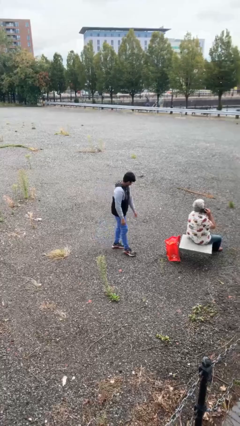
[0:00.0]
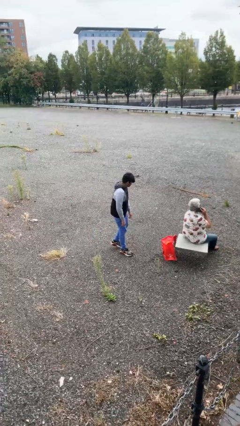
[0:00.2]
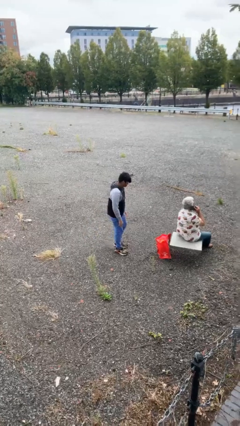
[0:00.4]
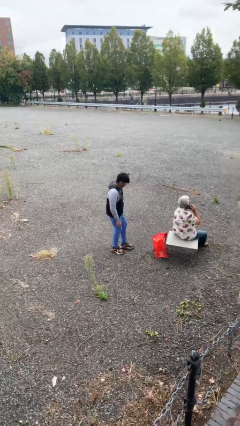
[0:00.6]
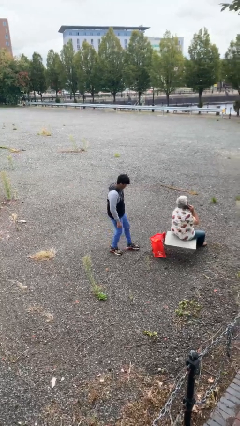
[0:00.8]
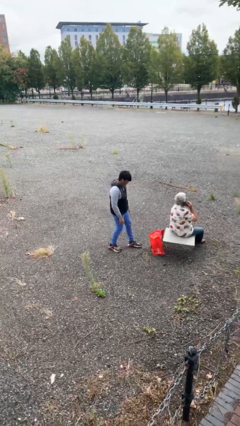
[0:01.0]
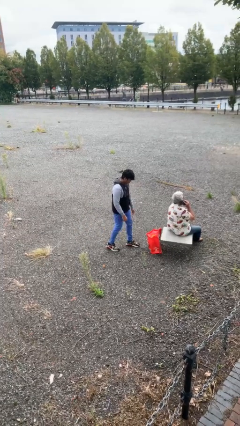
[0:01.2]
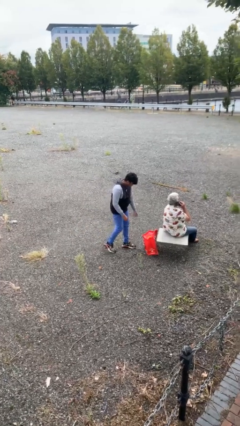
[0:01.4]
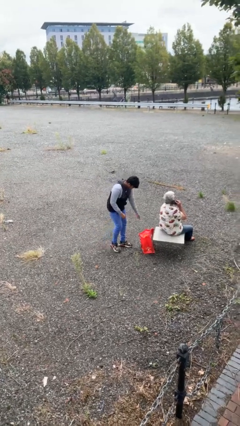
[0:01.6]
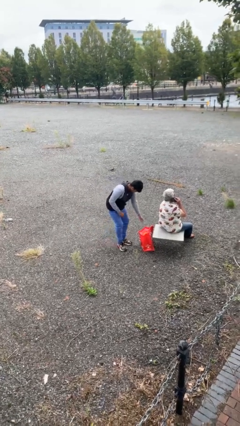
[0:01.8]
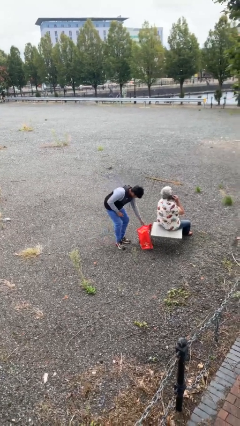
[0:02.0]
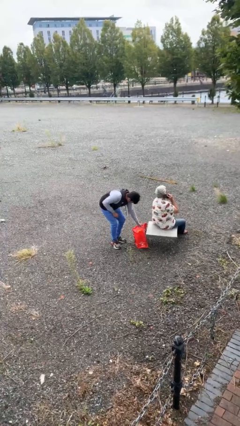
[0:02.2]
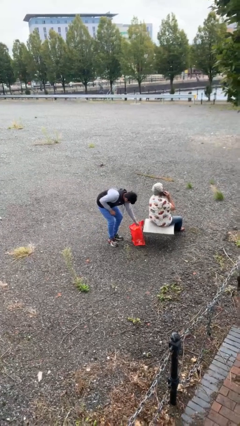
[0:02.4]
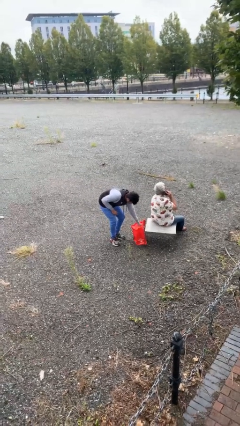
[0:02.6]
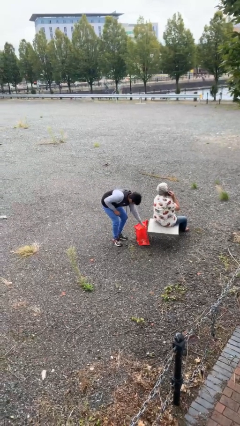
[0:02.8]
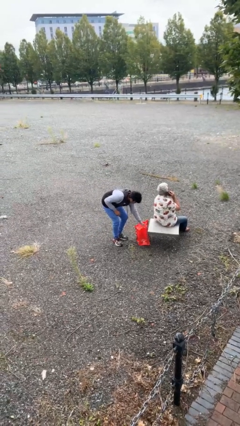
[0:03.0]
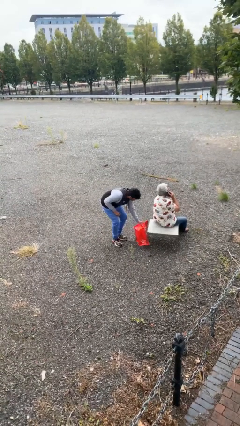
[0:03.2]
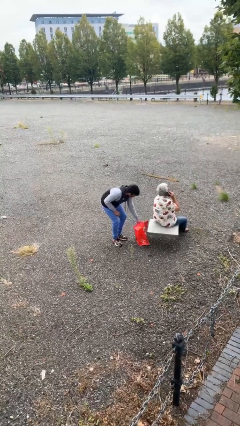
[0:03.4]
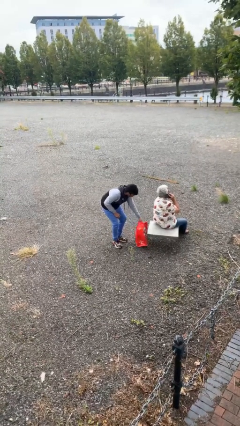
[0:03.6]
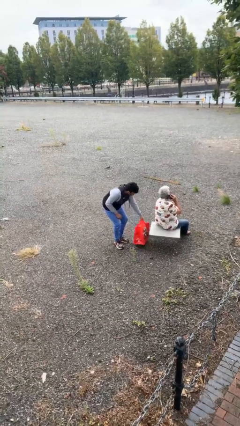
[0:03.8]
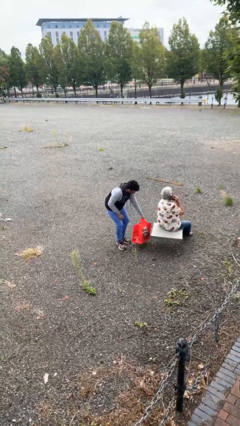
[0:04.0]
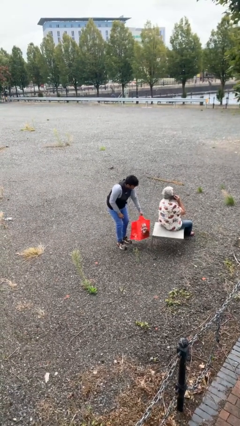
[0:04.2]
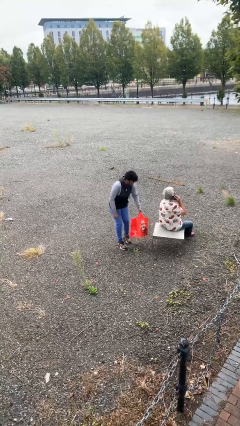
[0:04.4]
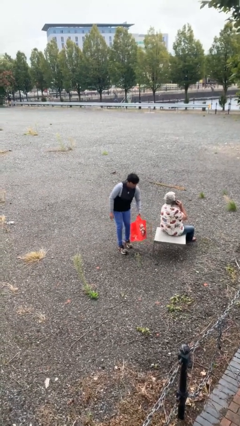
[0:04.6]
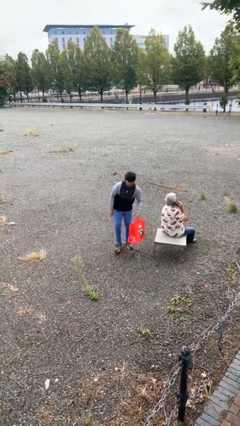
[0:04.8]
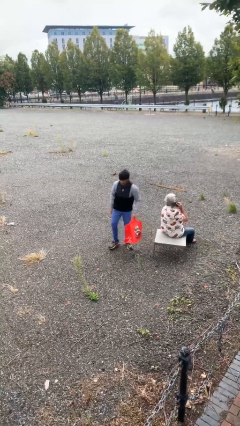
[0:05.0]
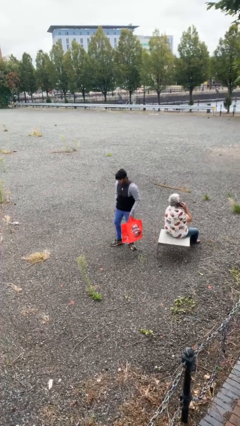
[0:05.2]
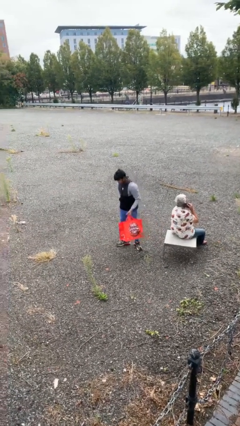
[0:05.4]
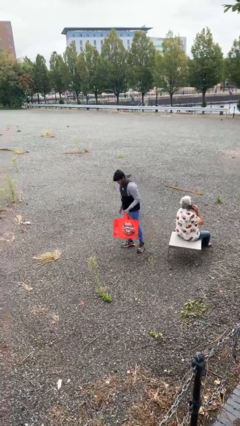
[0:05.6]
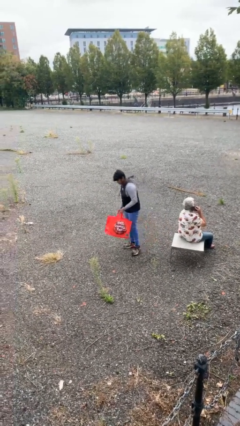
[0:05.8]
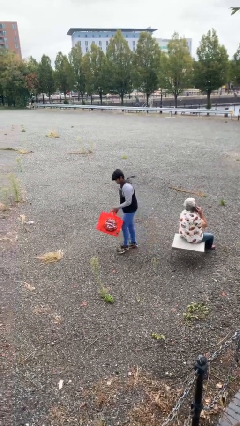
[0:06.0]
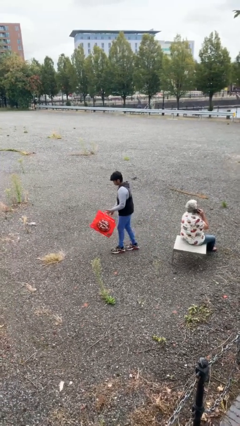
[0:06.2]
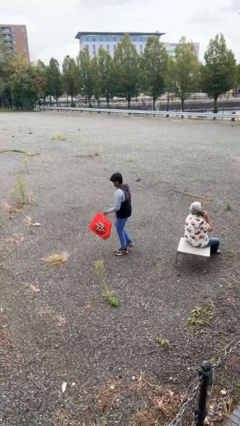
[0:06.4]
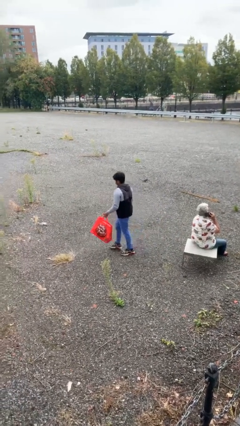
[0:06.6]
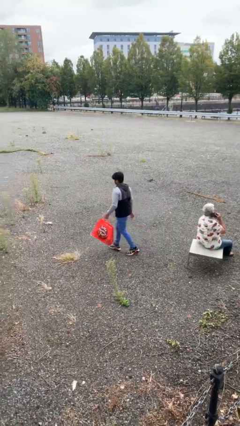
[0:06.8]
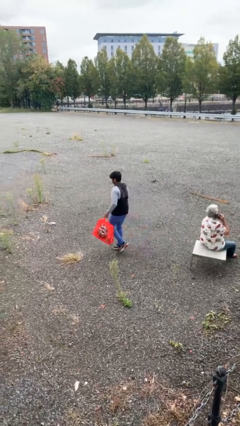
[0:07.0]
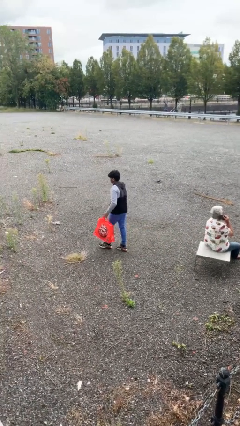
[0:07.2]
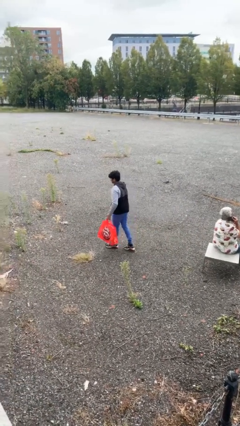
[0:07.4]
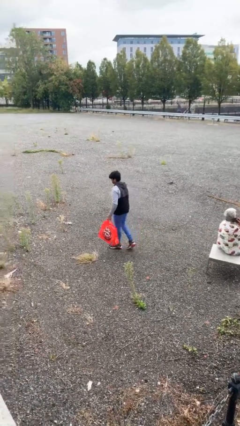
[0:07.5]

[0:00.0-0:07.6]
person steals object from person

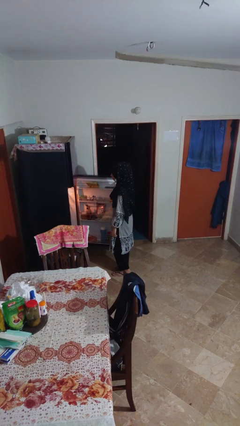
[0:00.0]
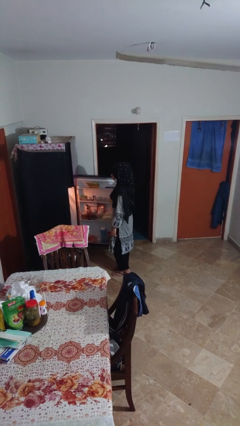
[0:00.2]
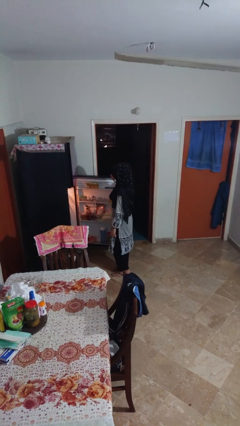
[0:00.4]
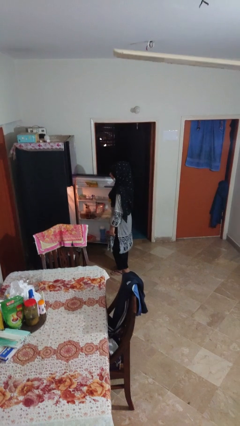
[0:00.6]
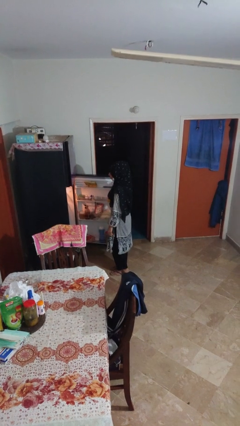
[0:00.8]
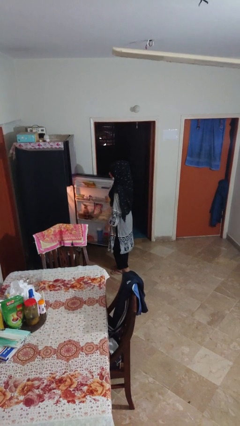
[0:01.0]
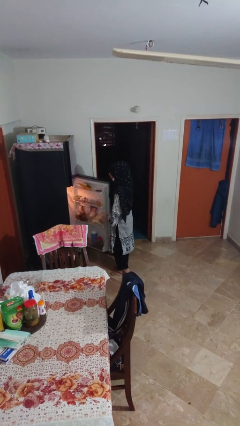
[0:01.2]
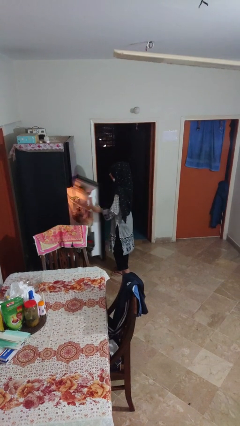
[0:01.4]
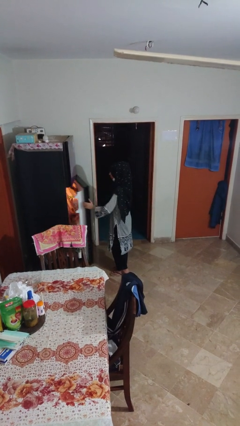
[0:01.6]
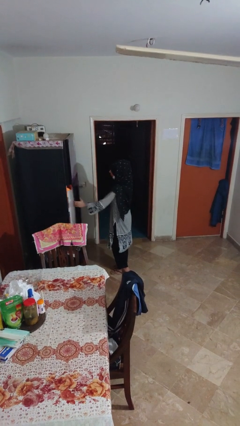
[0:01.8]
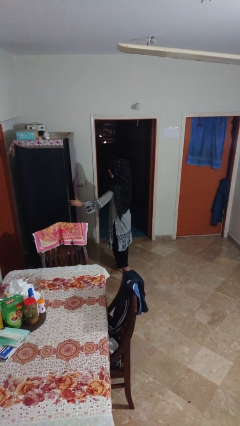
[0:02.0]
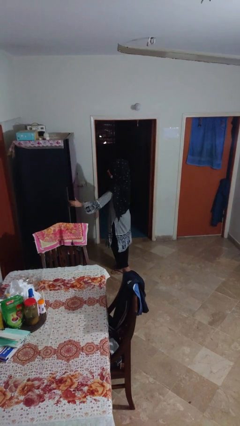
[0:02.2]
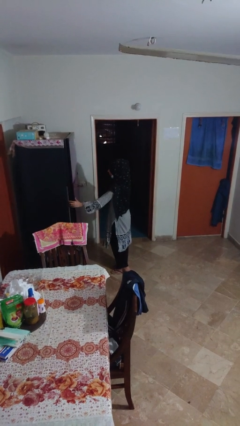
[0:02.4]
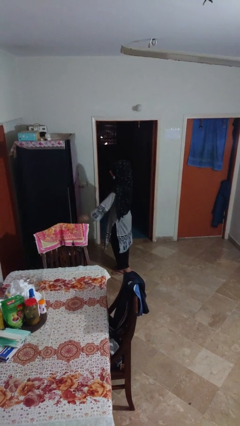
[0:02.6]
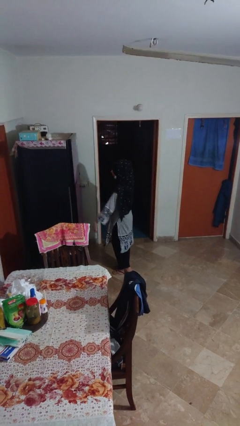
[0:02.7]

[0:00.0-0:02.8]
person closes refrigerator

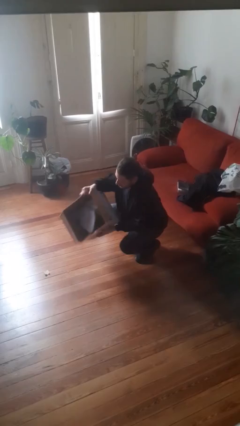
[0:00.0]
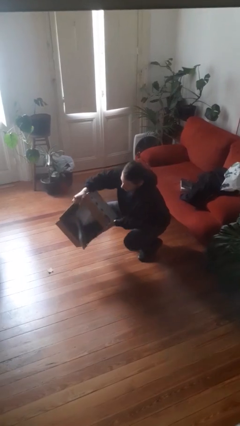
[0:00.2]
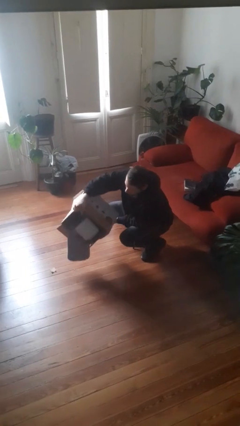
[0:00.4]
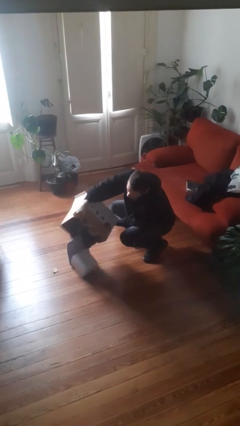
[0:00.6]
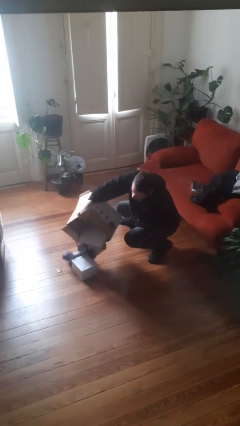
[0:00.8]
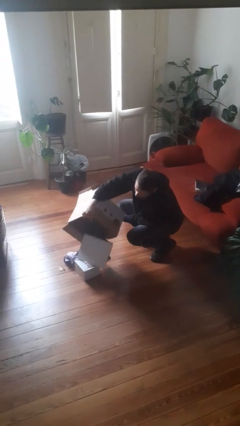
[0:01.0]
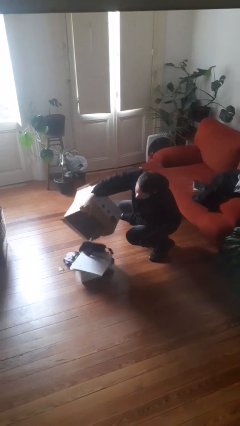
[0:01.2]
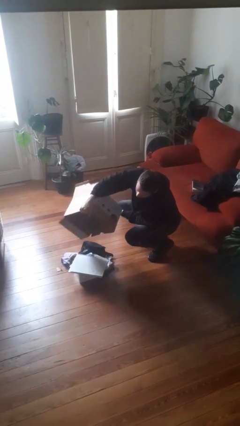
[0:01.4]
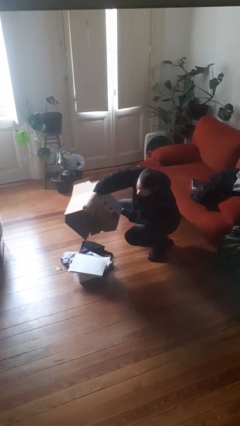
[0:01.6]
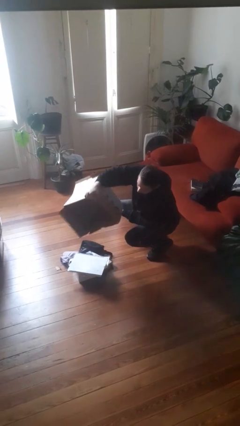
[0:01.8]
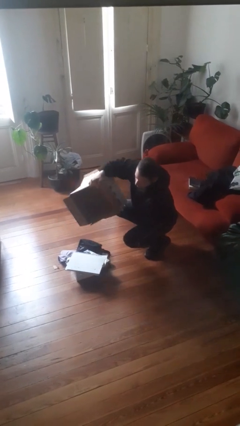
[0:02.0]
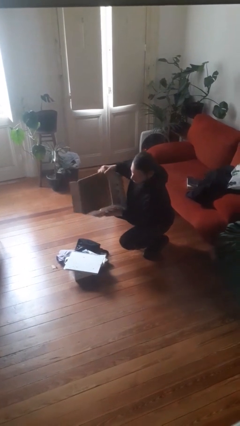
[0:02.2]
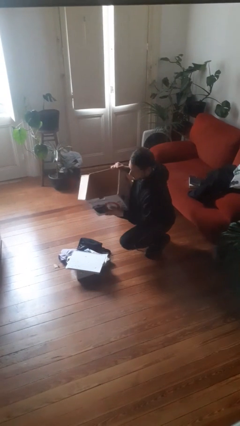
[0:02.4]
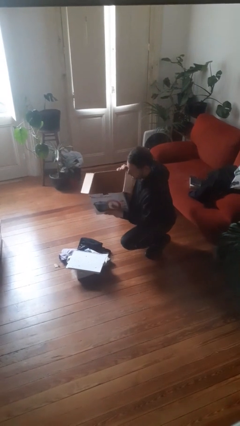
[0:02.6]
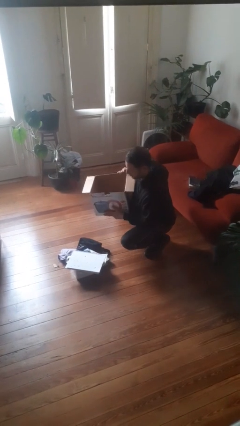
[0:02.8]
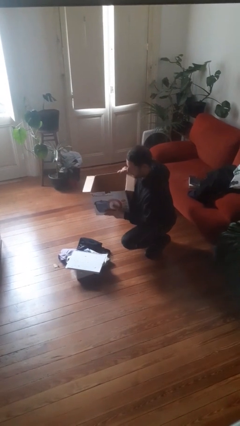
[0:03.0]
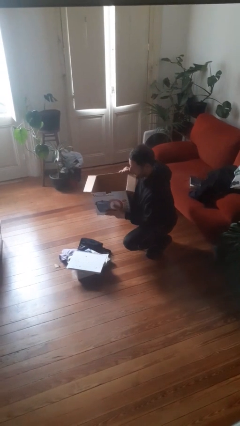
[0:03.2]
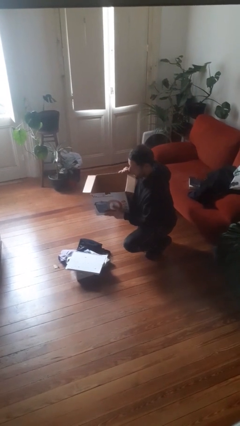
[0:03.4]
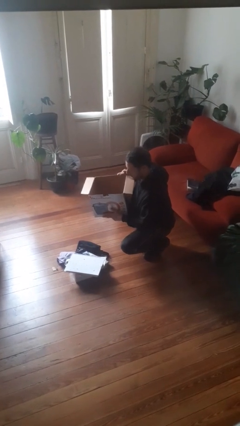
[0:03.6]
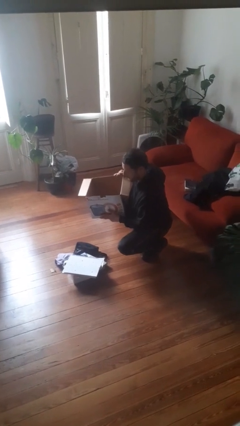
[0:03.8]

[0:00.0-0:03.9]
person unloads box onto floor

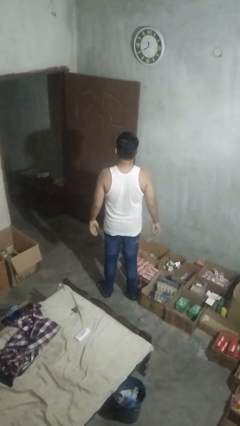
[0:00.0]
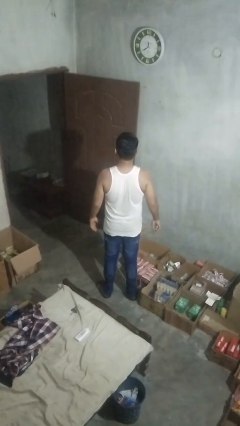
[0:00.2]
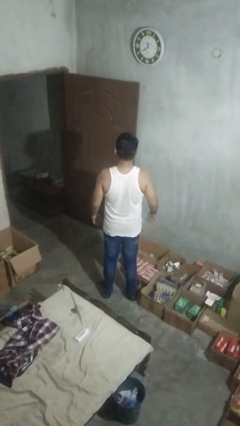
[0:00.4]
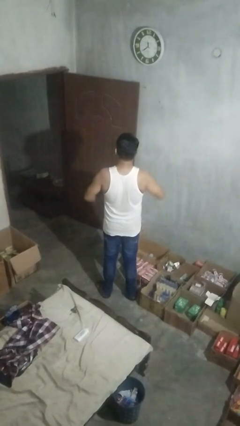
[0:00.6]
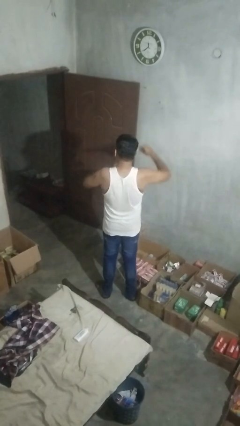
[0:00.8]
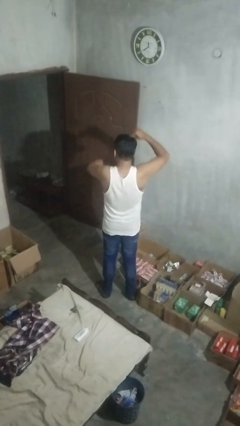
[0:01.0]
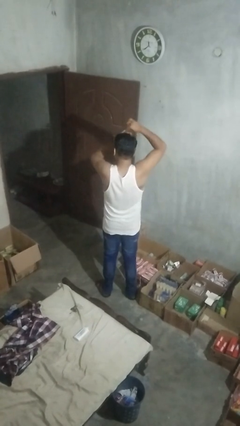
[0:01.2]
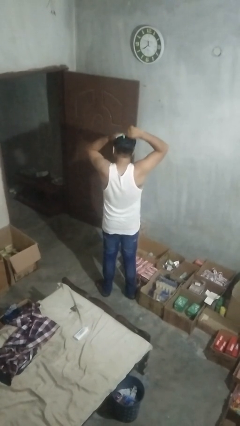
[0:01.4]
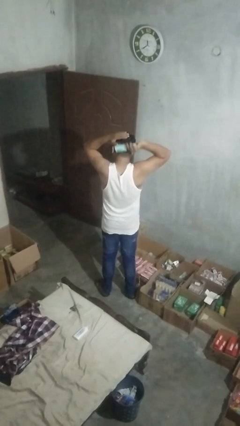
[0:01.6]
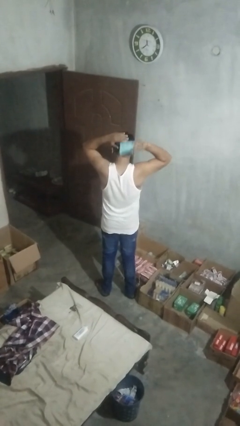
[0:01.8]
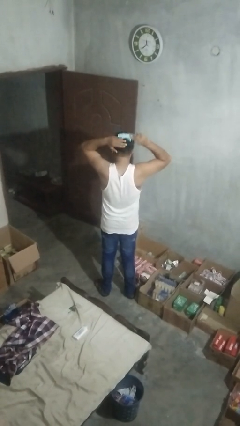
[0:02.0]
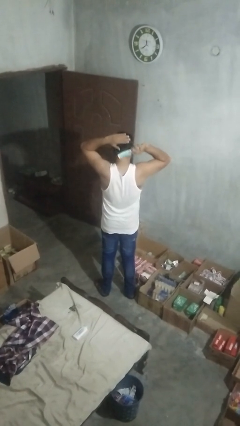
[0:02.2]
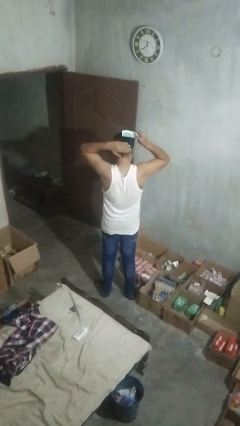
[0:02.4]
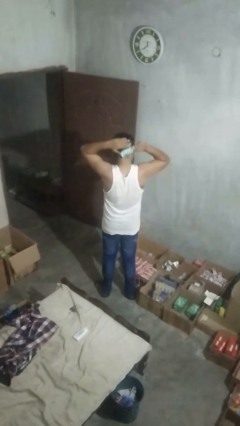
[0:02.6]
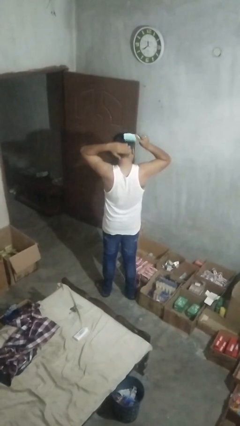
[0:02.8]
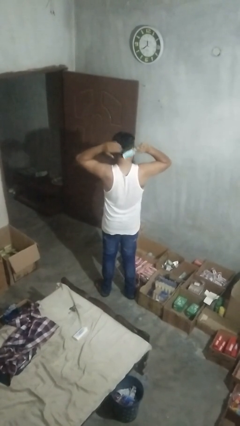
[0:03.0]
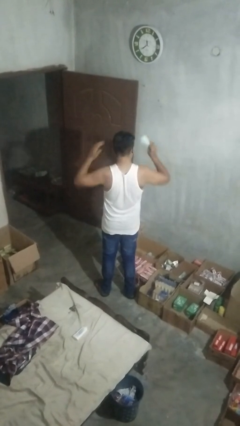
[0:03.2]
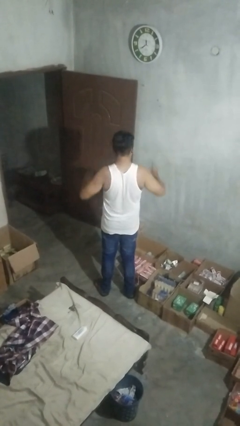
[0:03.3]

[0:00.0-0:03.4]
person brushes hair
